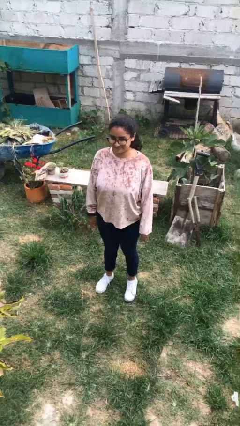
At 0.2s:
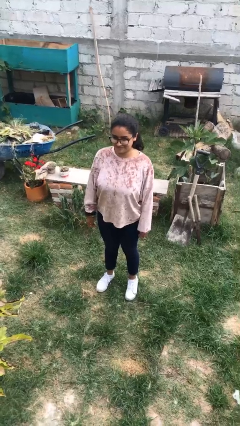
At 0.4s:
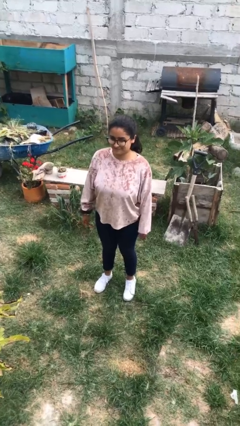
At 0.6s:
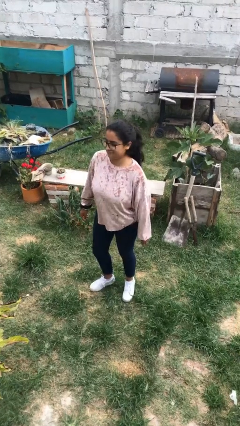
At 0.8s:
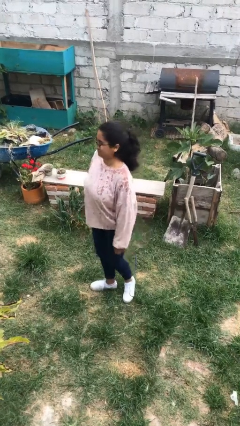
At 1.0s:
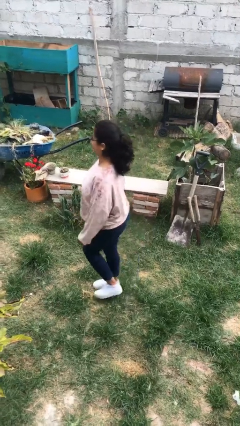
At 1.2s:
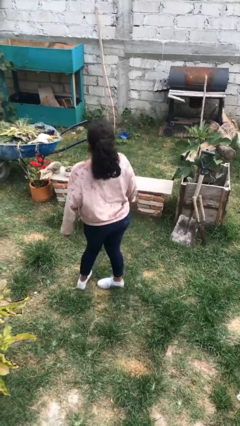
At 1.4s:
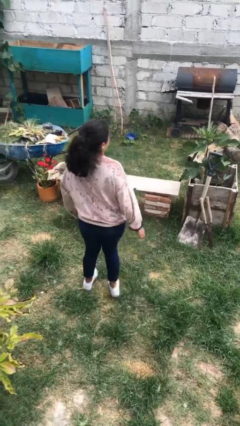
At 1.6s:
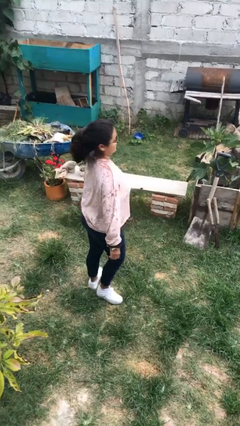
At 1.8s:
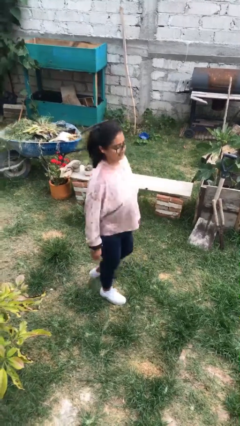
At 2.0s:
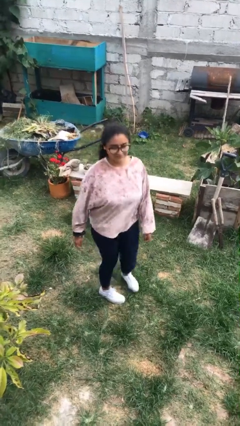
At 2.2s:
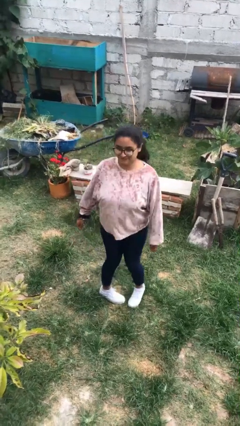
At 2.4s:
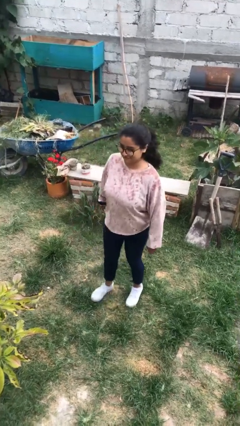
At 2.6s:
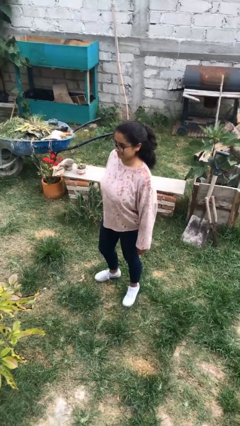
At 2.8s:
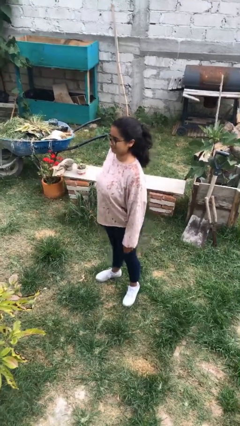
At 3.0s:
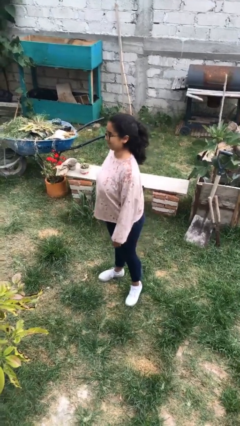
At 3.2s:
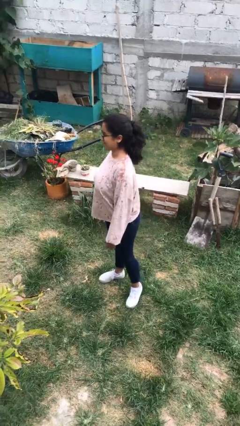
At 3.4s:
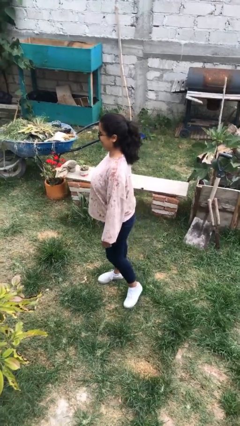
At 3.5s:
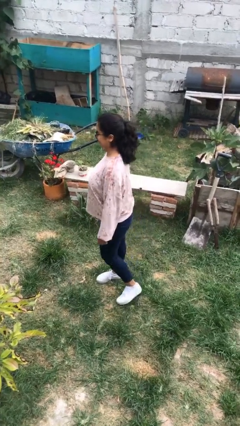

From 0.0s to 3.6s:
person twirls

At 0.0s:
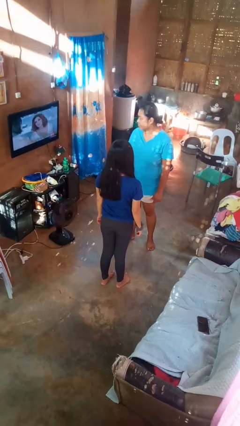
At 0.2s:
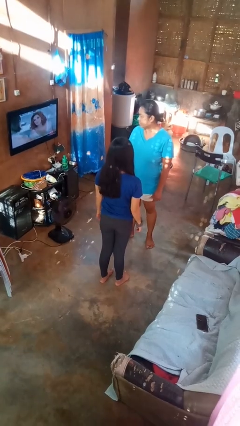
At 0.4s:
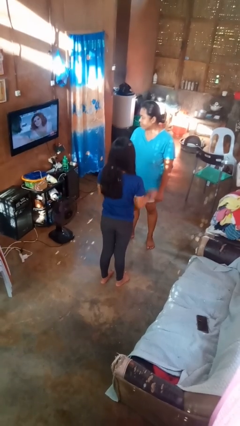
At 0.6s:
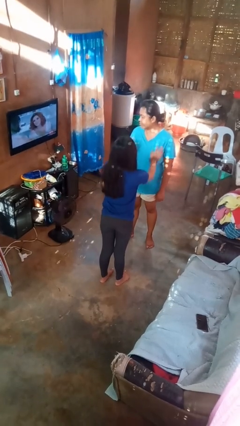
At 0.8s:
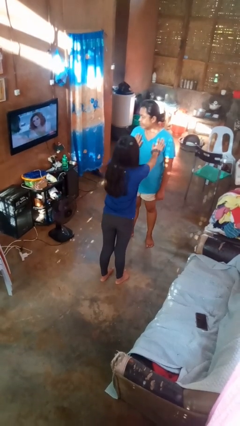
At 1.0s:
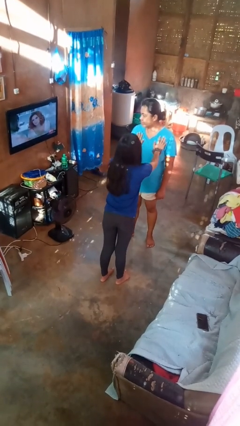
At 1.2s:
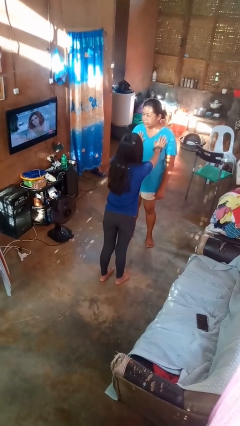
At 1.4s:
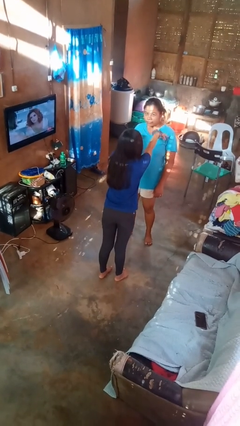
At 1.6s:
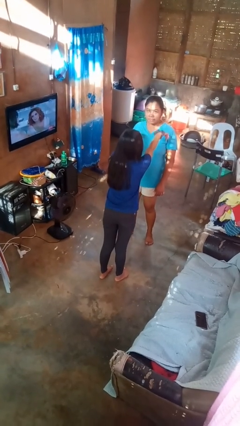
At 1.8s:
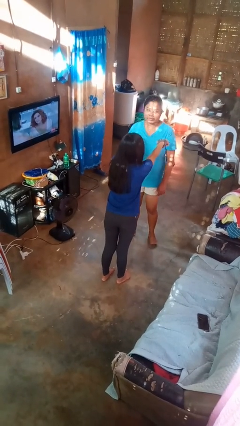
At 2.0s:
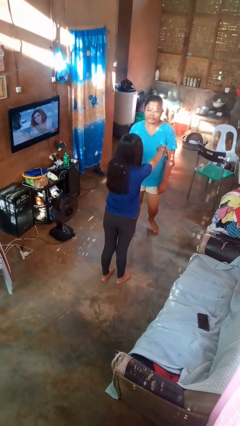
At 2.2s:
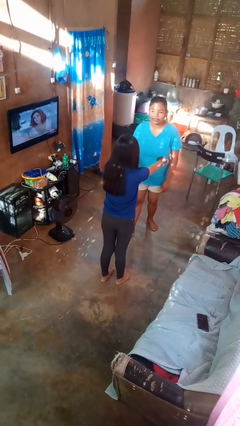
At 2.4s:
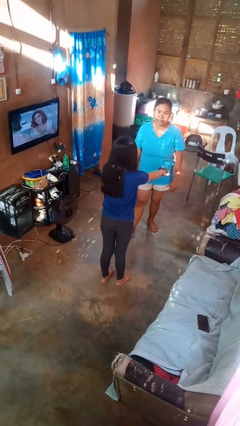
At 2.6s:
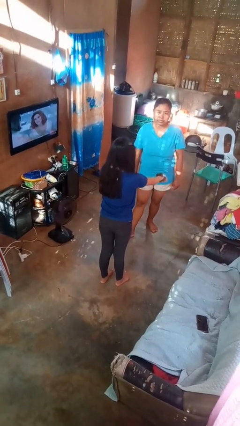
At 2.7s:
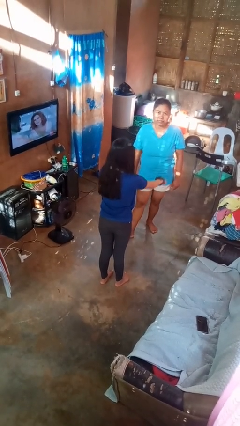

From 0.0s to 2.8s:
person shoves person

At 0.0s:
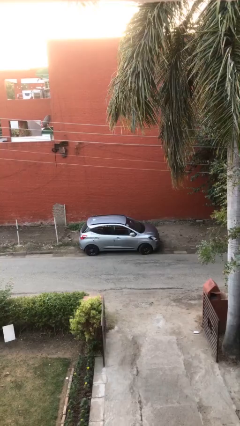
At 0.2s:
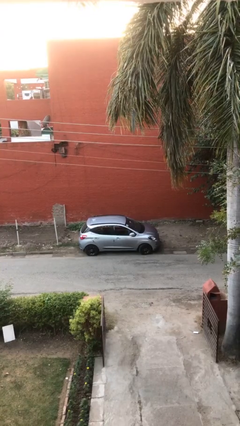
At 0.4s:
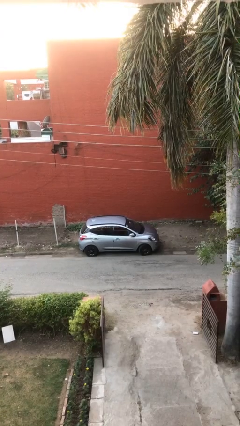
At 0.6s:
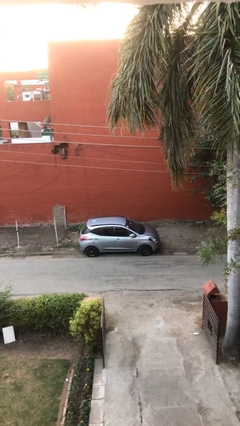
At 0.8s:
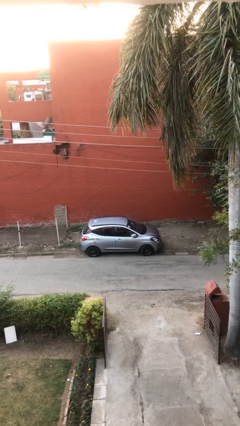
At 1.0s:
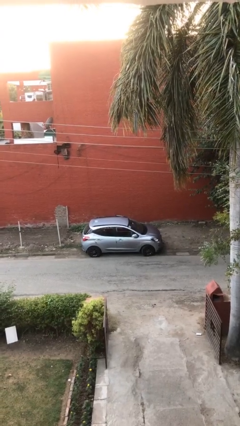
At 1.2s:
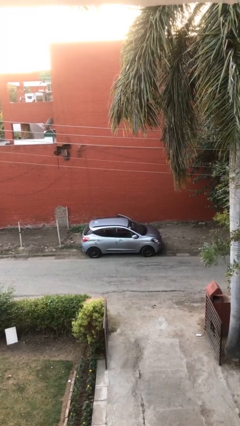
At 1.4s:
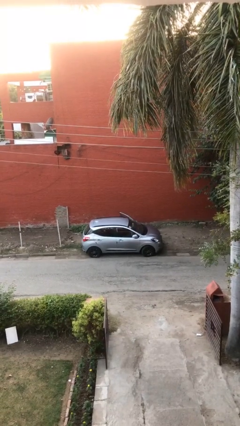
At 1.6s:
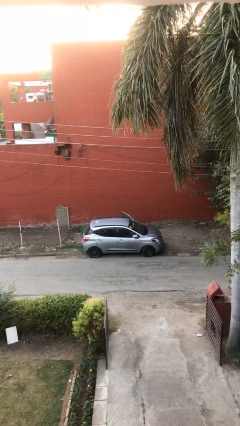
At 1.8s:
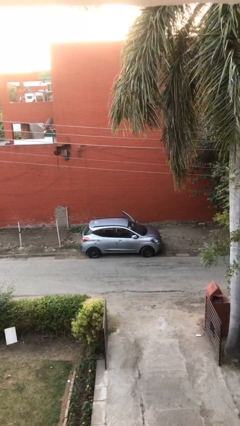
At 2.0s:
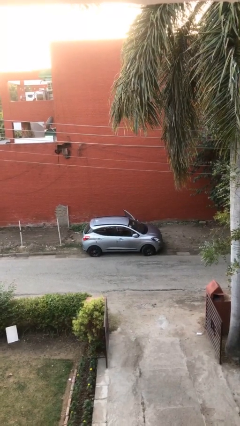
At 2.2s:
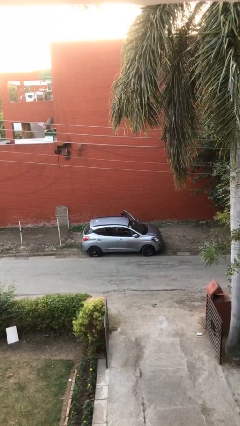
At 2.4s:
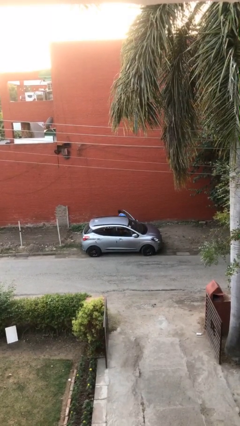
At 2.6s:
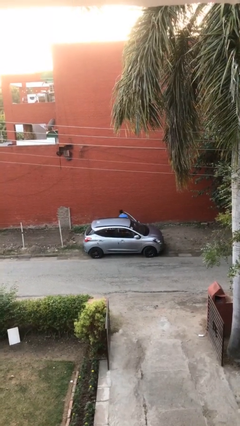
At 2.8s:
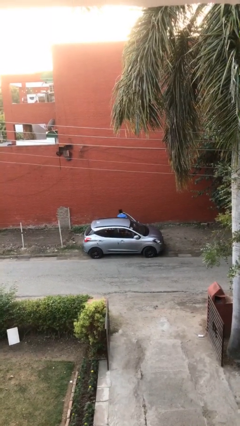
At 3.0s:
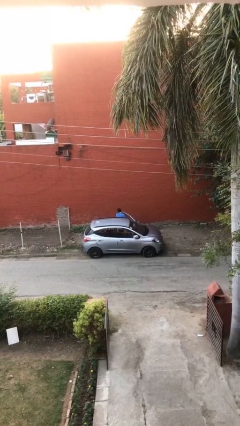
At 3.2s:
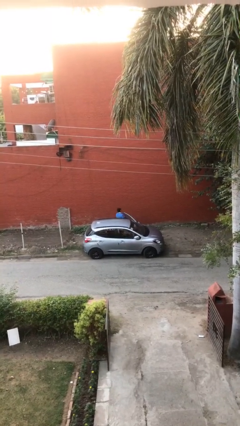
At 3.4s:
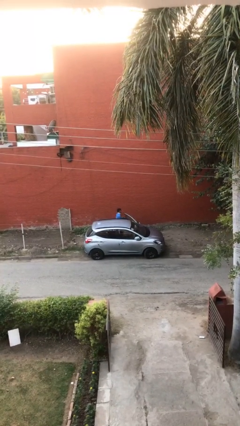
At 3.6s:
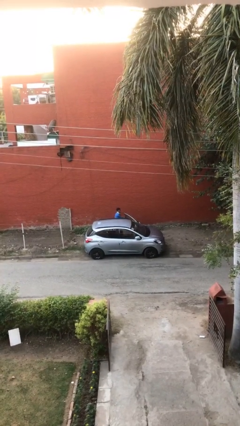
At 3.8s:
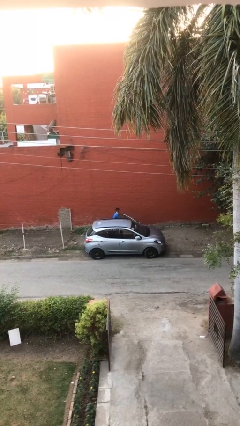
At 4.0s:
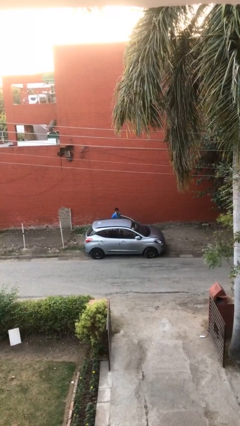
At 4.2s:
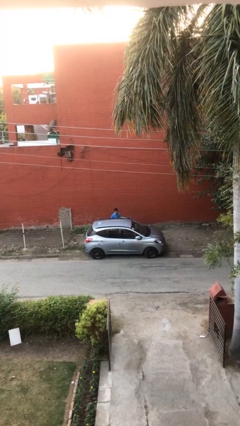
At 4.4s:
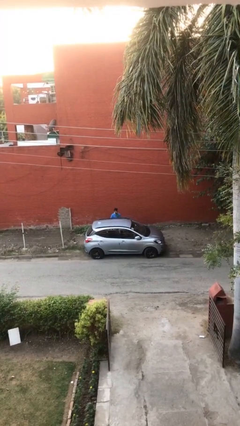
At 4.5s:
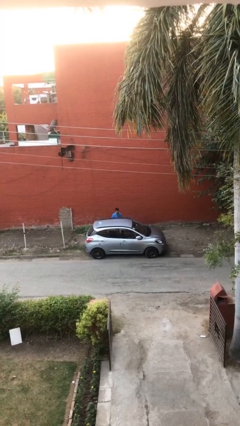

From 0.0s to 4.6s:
person exits car

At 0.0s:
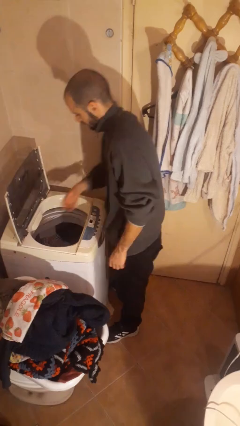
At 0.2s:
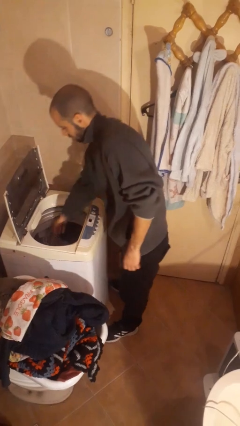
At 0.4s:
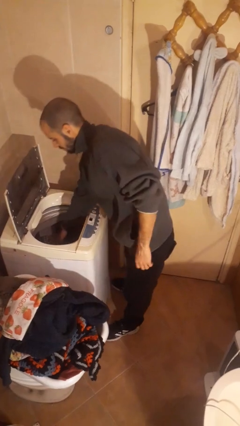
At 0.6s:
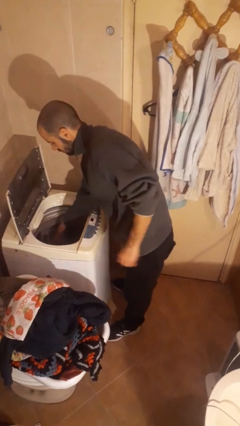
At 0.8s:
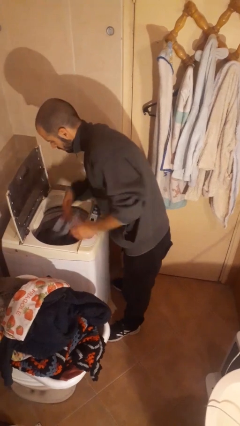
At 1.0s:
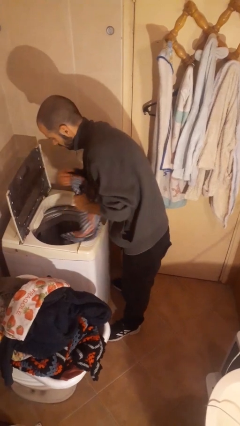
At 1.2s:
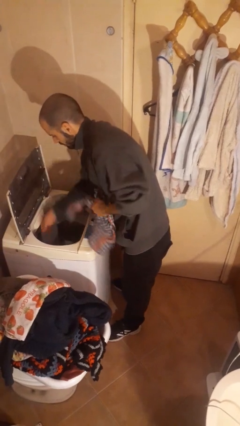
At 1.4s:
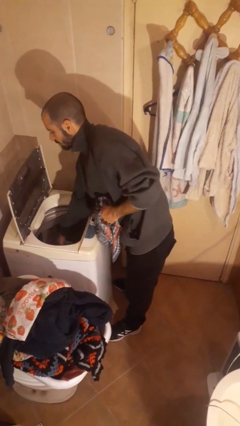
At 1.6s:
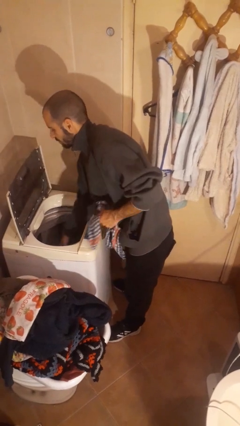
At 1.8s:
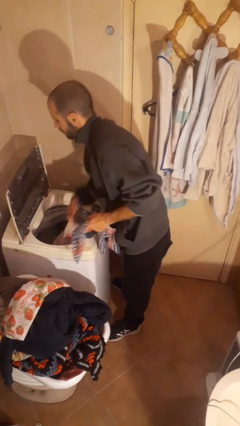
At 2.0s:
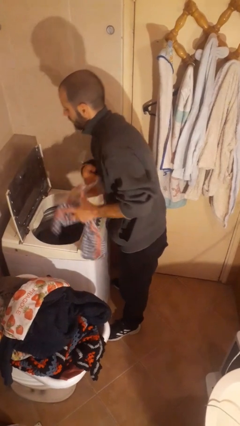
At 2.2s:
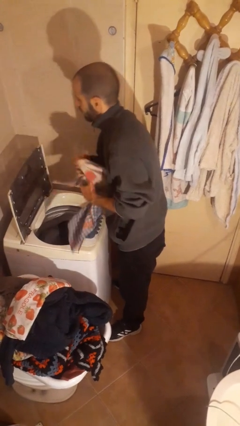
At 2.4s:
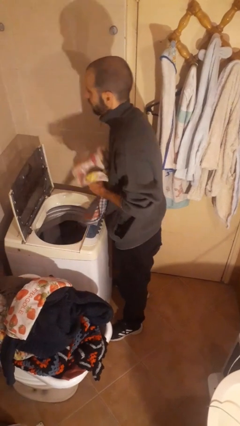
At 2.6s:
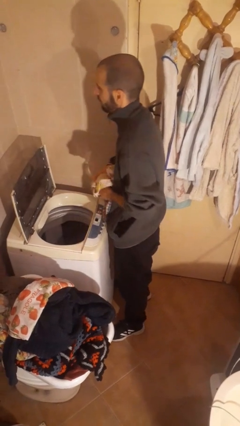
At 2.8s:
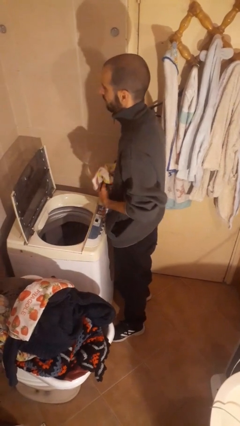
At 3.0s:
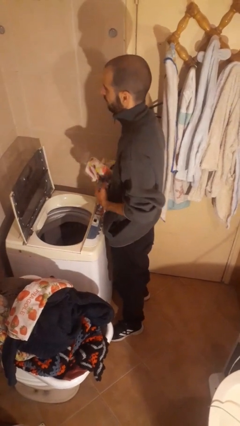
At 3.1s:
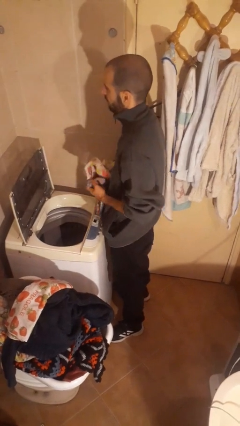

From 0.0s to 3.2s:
person loads clotheswasher

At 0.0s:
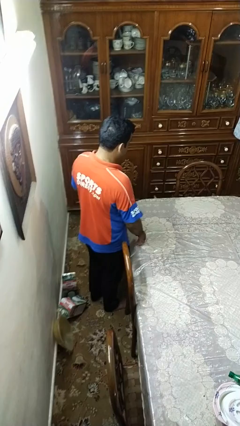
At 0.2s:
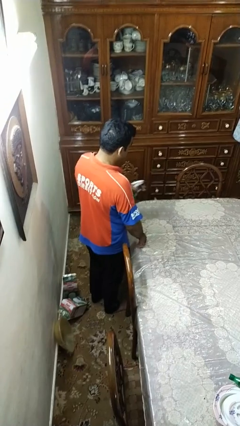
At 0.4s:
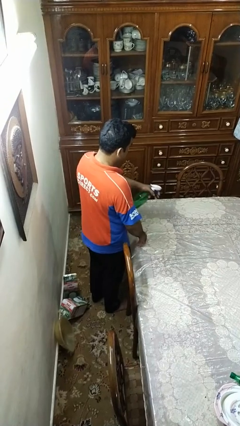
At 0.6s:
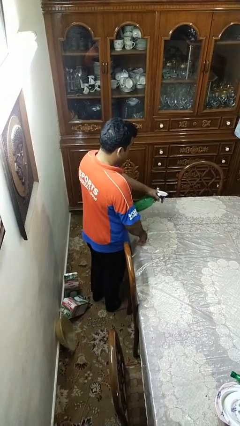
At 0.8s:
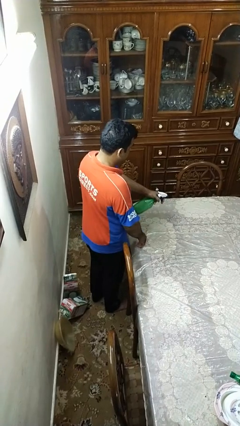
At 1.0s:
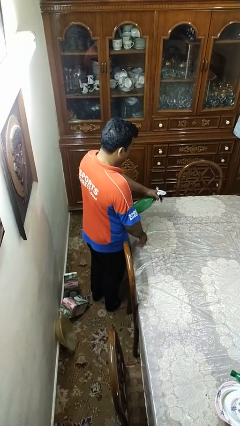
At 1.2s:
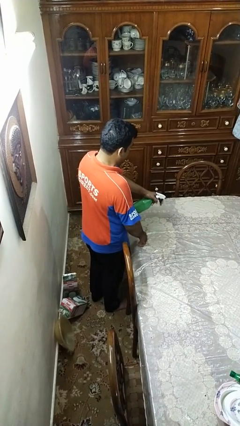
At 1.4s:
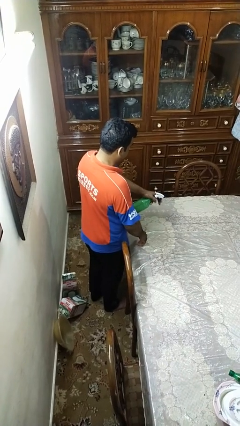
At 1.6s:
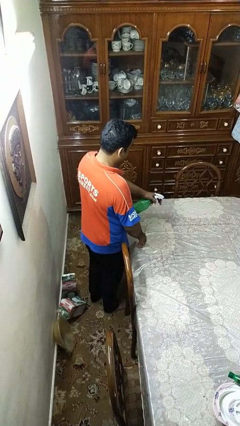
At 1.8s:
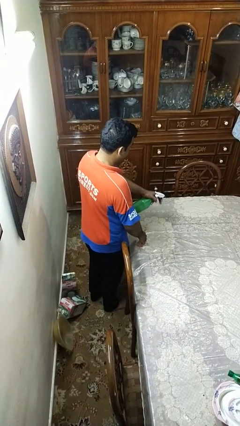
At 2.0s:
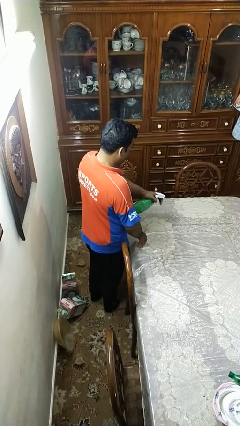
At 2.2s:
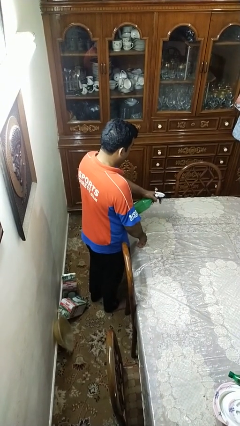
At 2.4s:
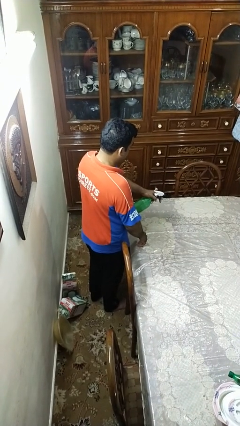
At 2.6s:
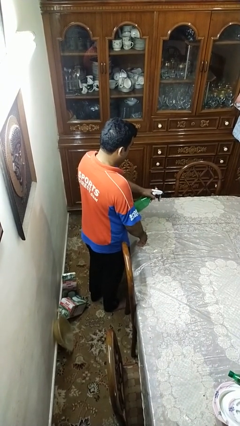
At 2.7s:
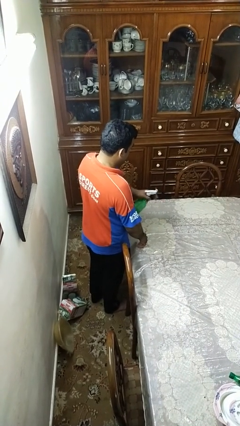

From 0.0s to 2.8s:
person sprays from bottle

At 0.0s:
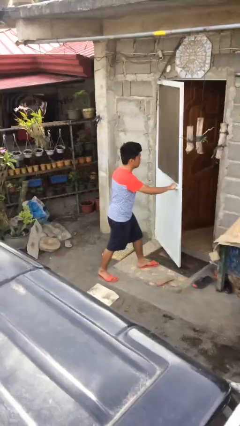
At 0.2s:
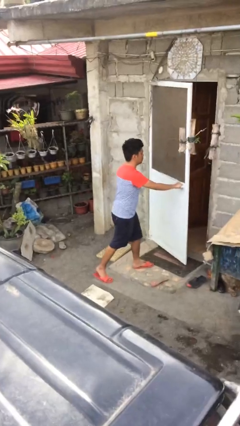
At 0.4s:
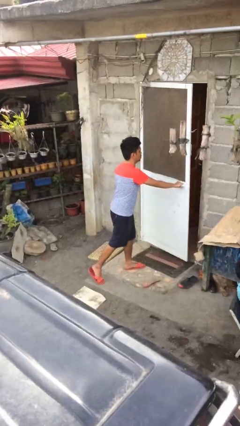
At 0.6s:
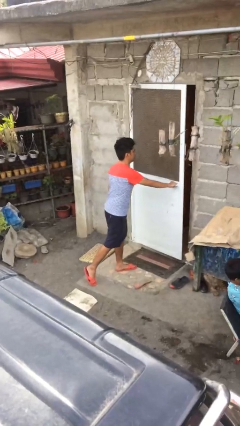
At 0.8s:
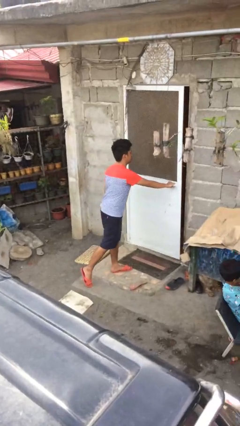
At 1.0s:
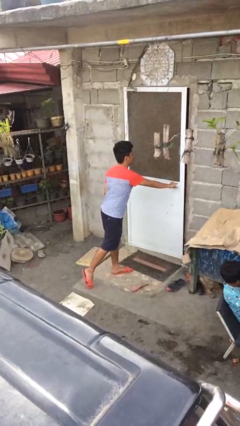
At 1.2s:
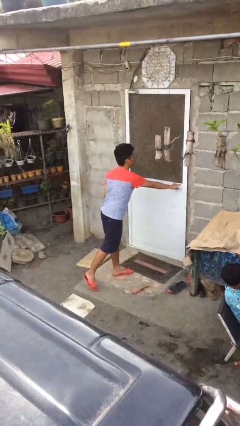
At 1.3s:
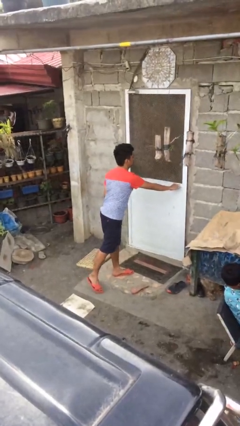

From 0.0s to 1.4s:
person closes facility door
